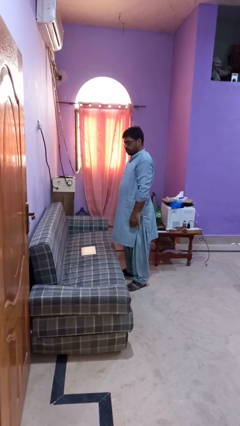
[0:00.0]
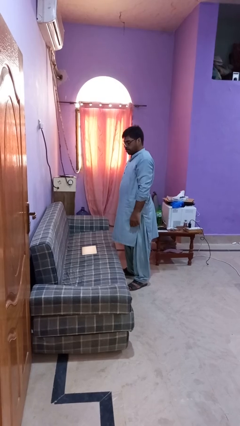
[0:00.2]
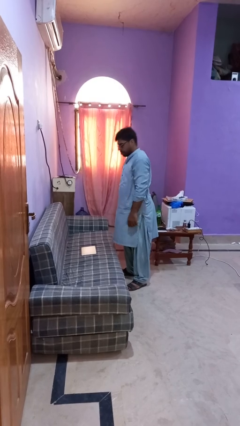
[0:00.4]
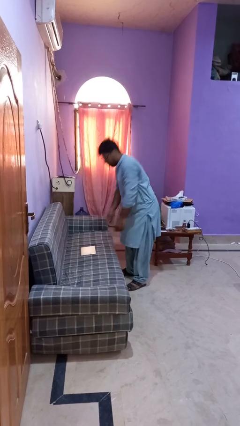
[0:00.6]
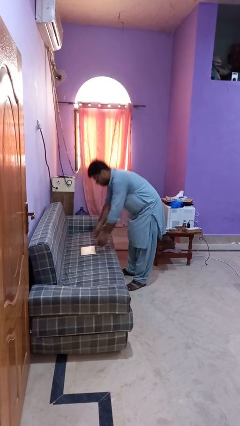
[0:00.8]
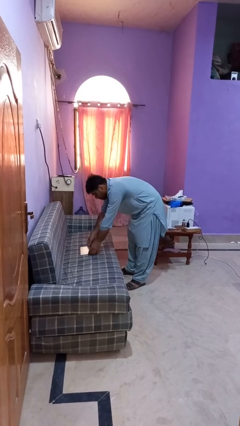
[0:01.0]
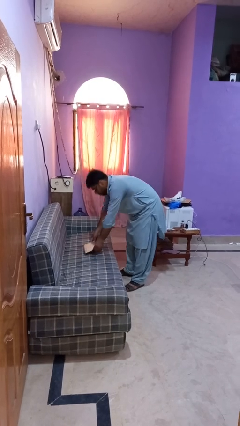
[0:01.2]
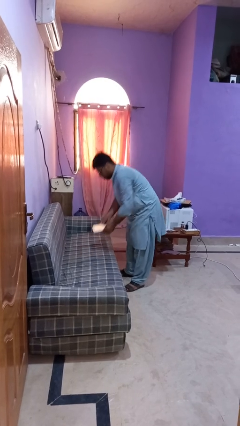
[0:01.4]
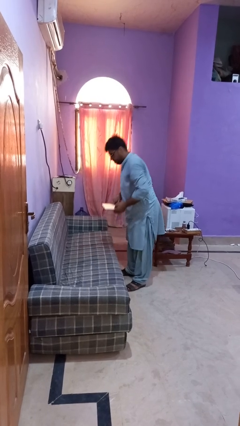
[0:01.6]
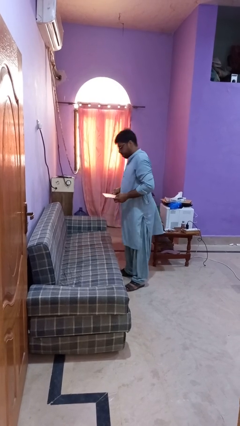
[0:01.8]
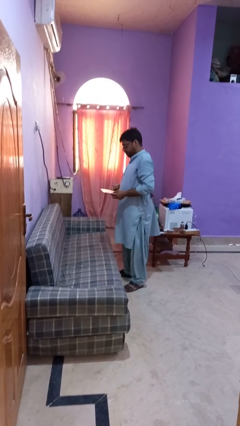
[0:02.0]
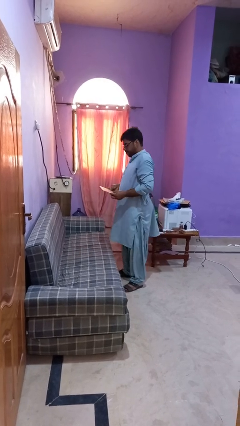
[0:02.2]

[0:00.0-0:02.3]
person picks up object from couch

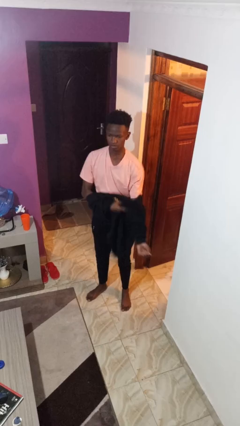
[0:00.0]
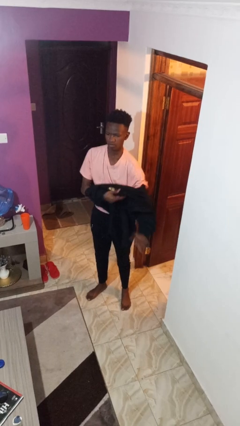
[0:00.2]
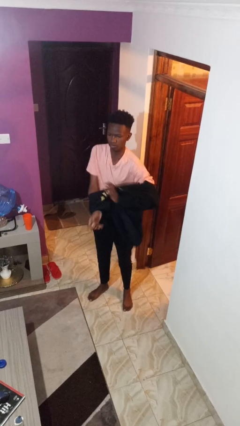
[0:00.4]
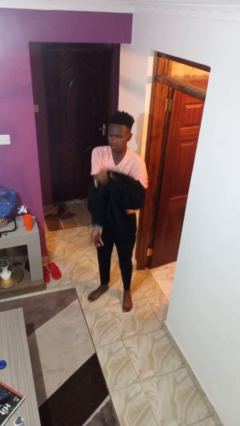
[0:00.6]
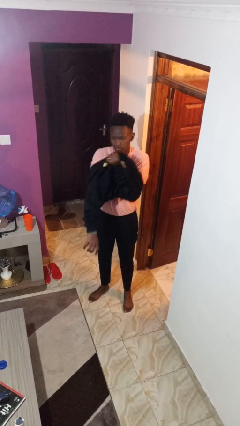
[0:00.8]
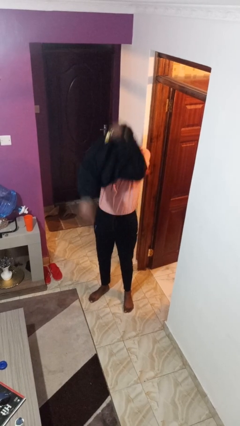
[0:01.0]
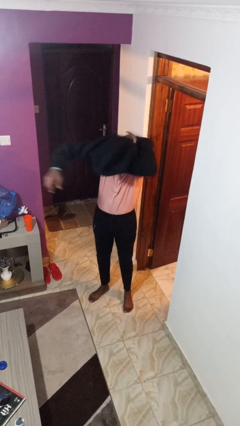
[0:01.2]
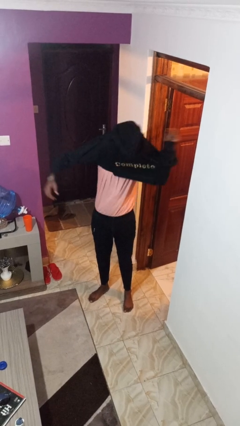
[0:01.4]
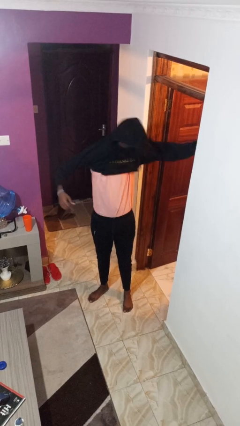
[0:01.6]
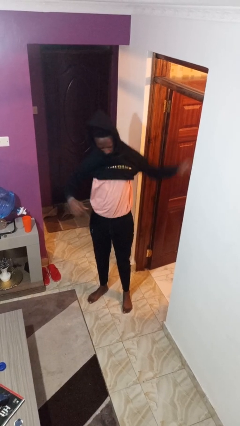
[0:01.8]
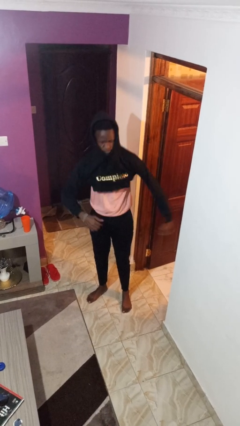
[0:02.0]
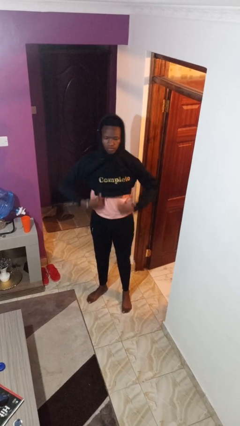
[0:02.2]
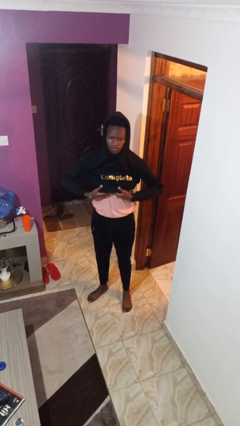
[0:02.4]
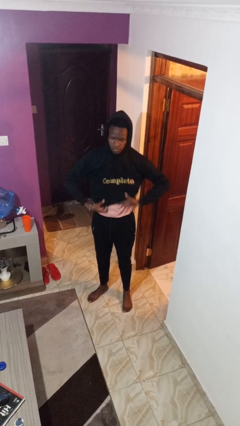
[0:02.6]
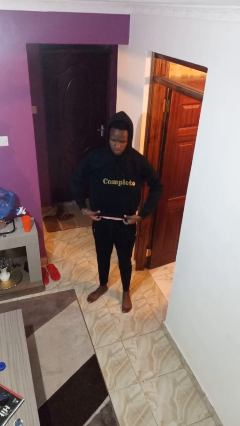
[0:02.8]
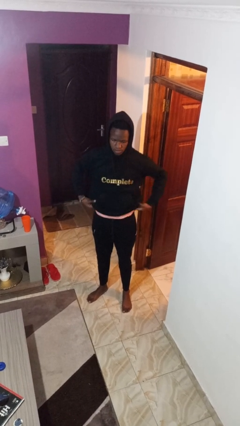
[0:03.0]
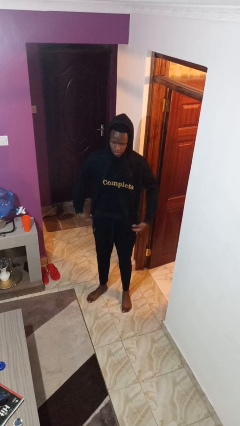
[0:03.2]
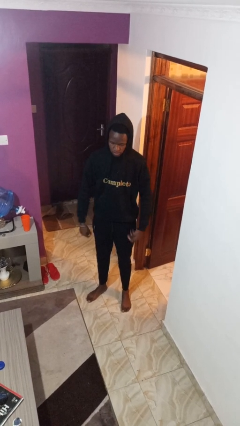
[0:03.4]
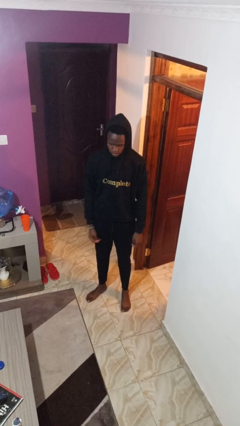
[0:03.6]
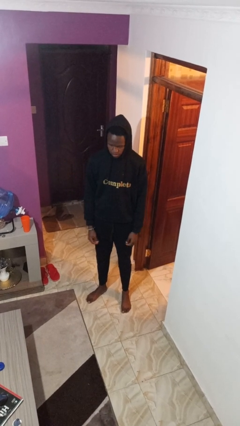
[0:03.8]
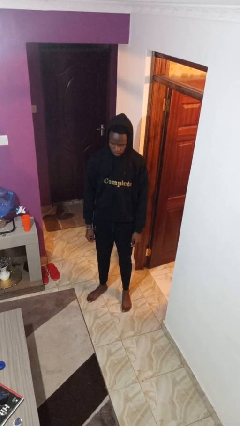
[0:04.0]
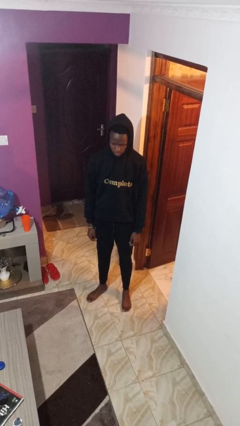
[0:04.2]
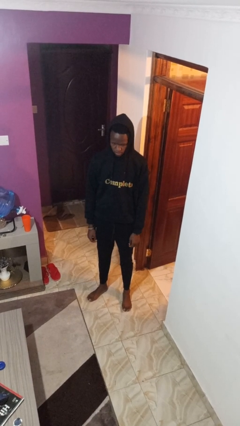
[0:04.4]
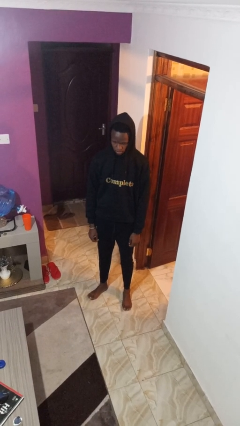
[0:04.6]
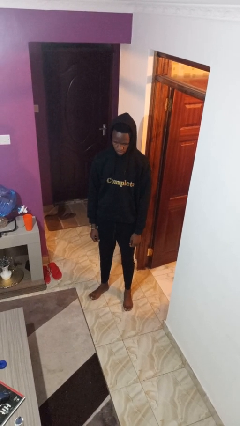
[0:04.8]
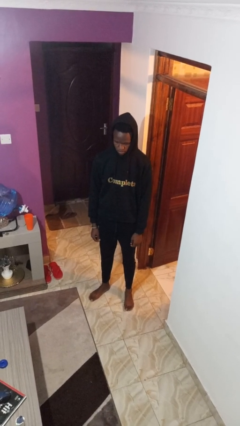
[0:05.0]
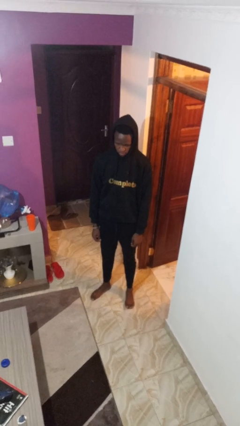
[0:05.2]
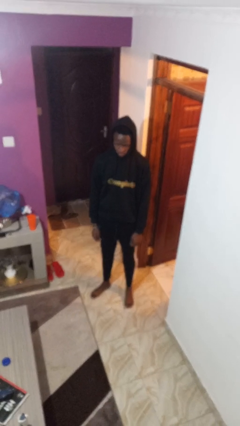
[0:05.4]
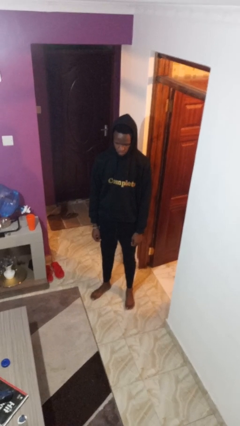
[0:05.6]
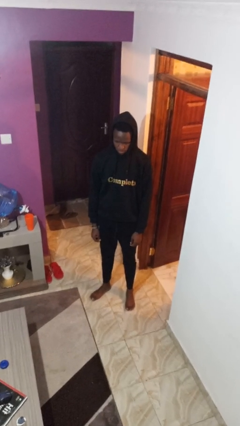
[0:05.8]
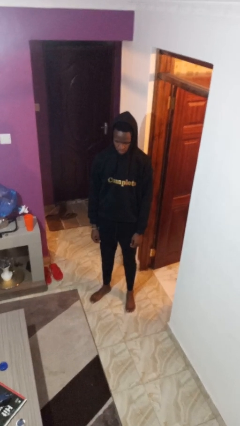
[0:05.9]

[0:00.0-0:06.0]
person puts on hoodie

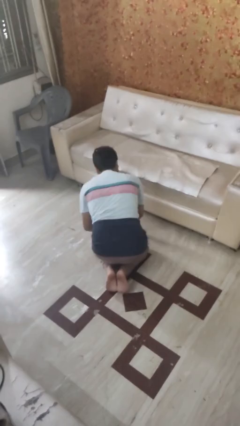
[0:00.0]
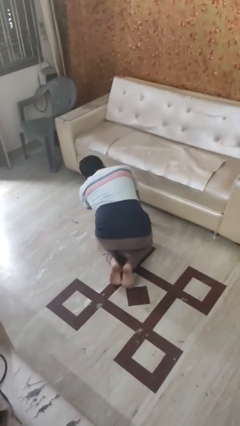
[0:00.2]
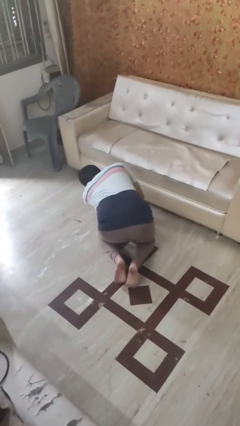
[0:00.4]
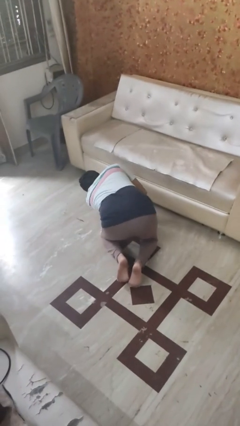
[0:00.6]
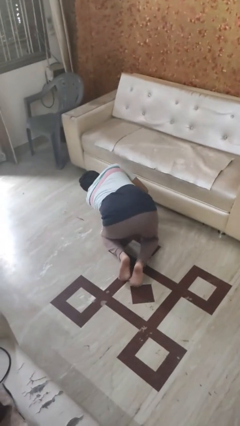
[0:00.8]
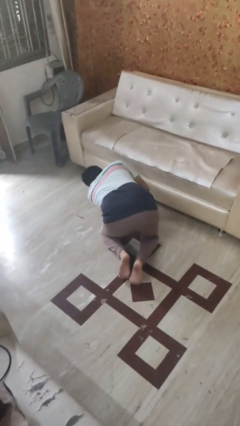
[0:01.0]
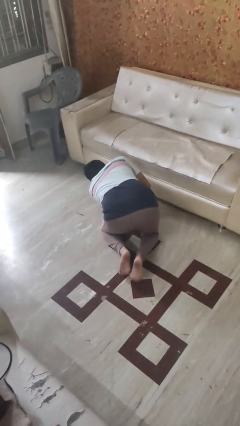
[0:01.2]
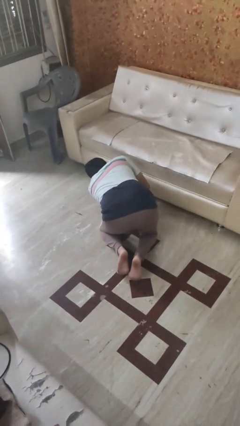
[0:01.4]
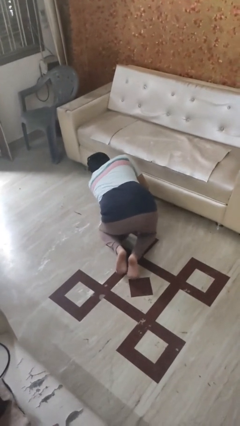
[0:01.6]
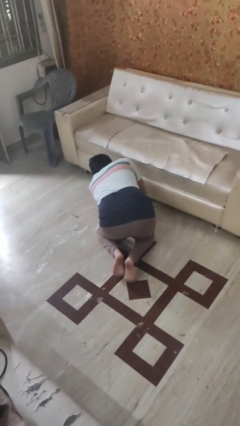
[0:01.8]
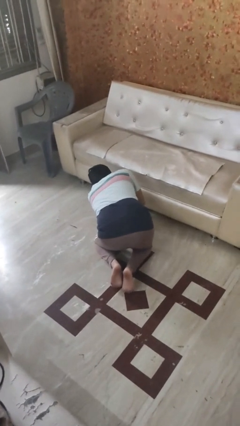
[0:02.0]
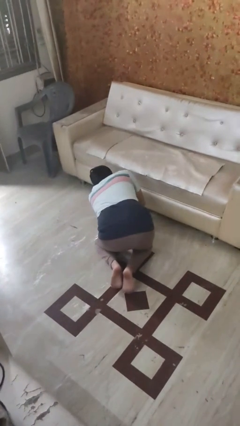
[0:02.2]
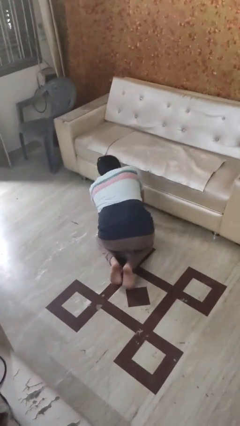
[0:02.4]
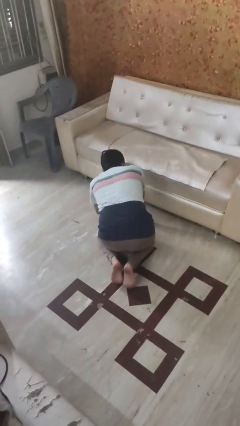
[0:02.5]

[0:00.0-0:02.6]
person searches under bed

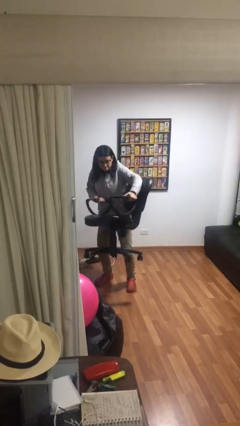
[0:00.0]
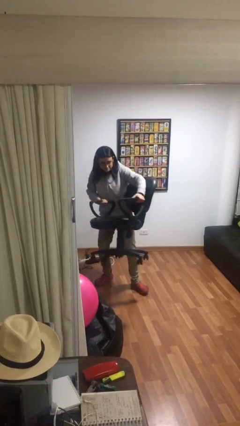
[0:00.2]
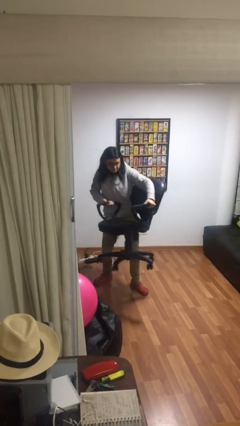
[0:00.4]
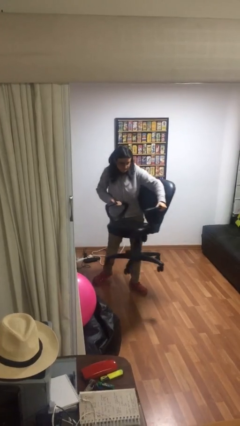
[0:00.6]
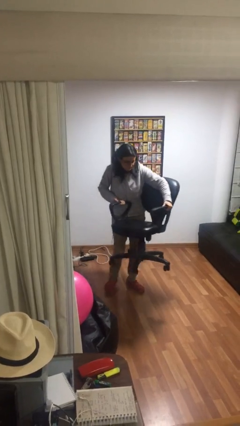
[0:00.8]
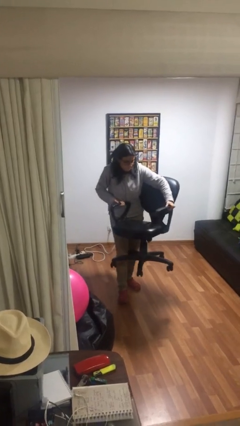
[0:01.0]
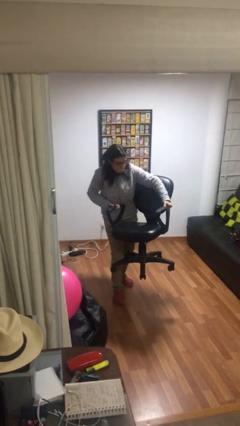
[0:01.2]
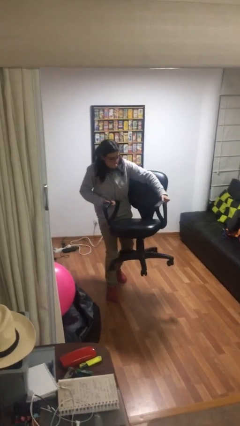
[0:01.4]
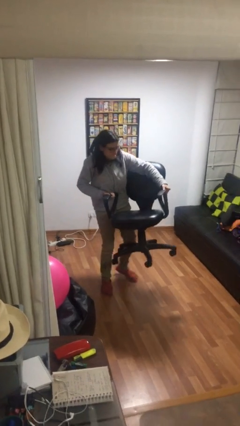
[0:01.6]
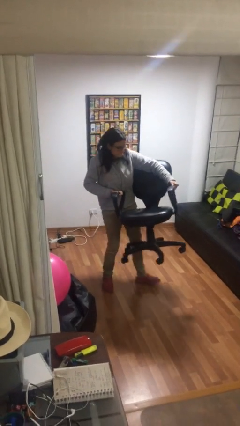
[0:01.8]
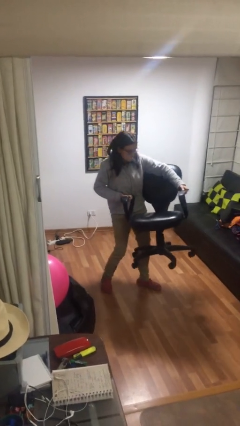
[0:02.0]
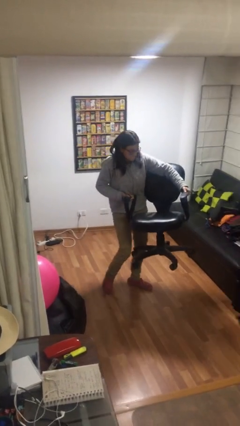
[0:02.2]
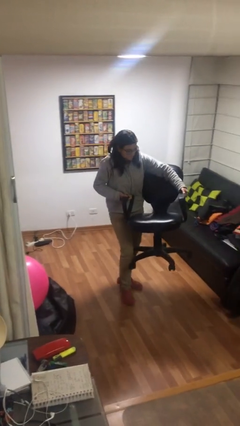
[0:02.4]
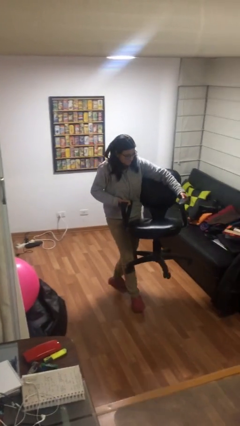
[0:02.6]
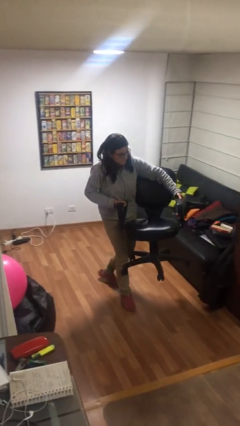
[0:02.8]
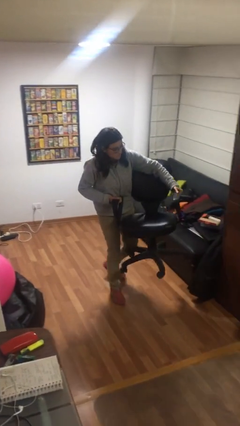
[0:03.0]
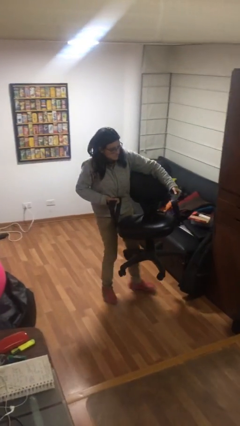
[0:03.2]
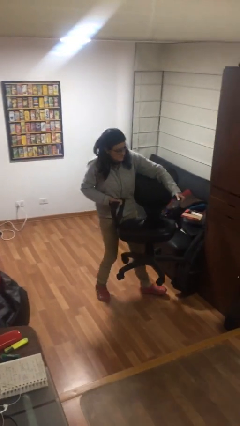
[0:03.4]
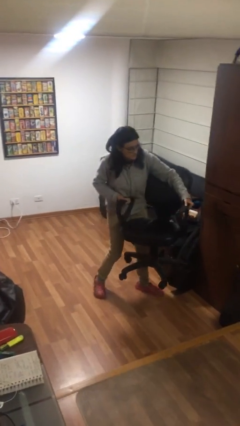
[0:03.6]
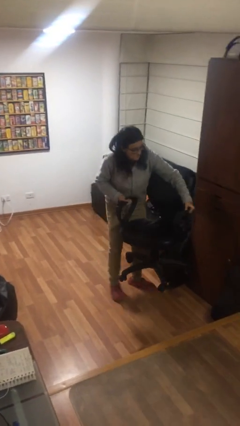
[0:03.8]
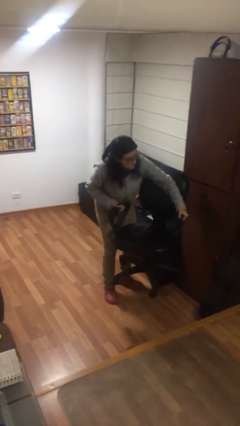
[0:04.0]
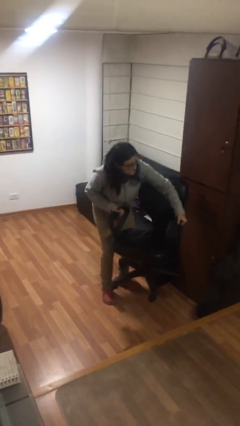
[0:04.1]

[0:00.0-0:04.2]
person carries heavy object

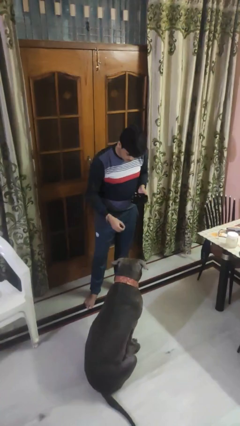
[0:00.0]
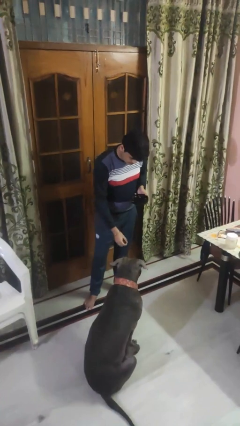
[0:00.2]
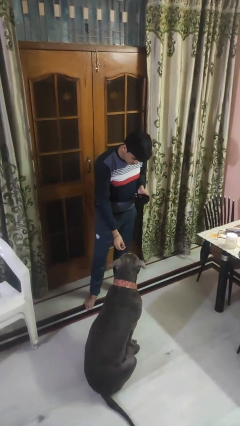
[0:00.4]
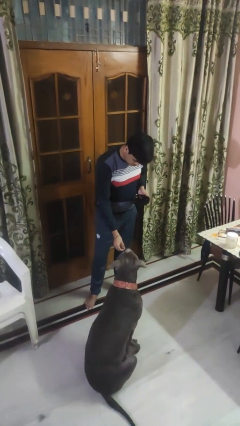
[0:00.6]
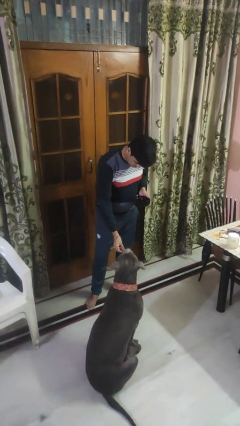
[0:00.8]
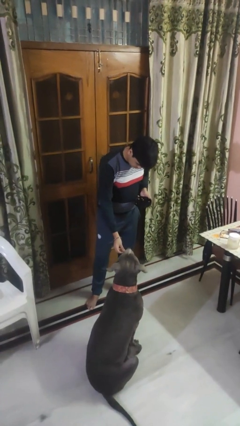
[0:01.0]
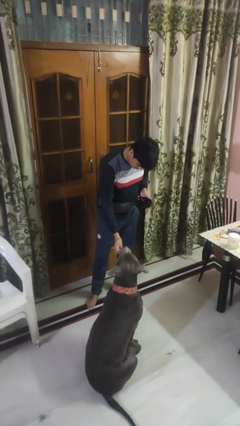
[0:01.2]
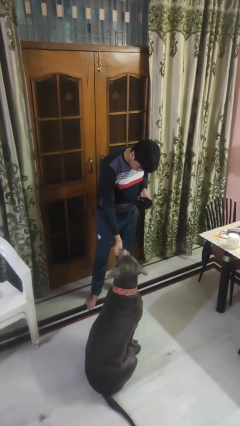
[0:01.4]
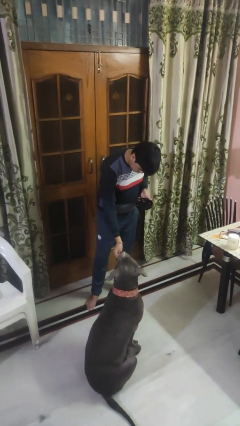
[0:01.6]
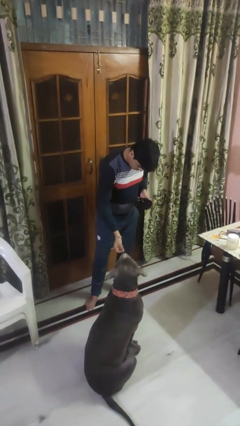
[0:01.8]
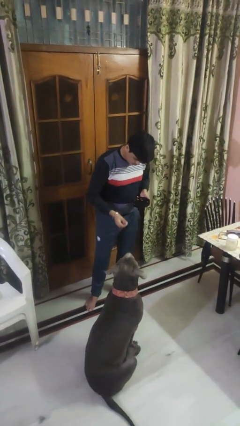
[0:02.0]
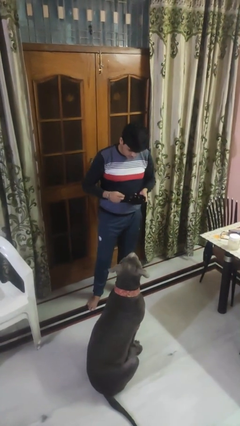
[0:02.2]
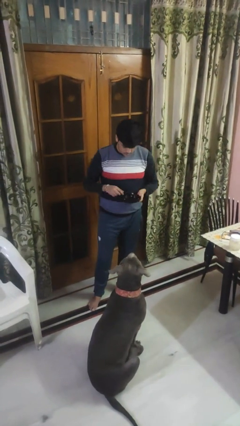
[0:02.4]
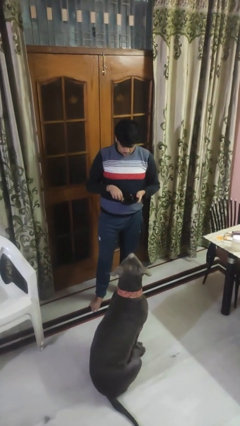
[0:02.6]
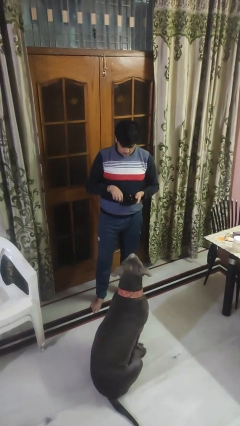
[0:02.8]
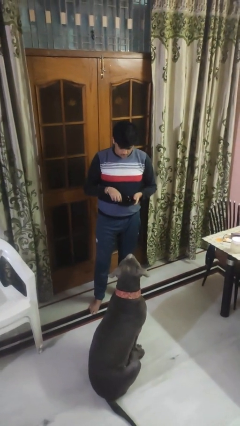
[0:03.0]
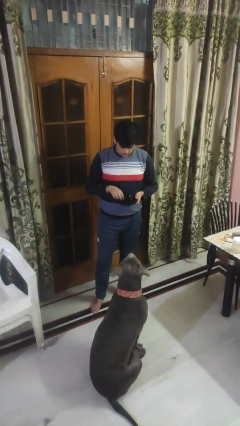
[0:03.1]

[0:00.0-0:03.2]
person feeds dog
